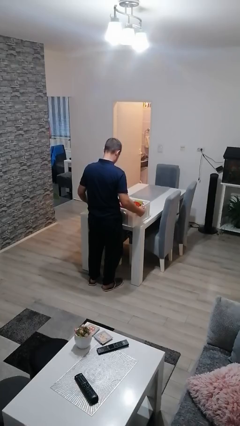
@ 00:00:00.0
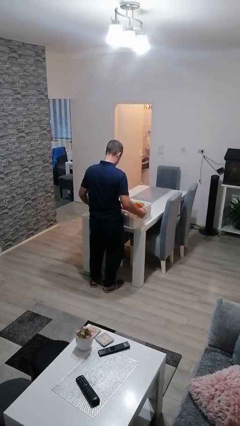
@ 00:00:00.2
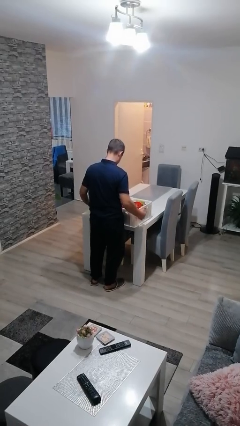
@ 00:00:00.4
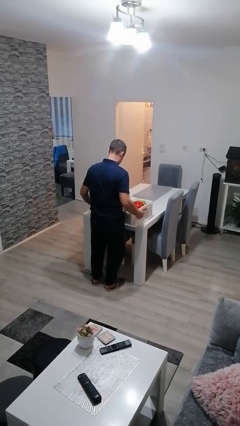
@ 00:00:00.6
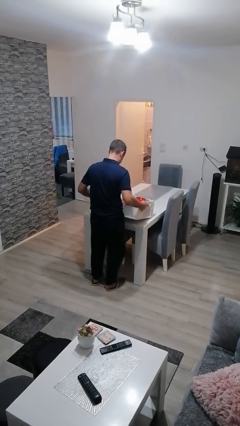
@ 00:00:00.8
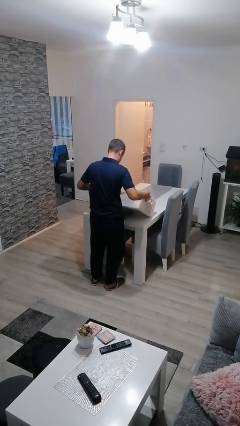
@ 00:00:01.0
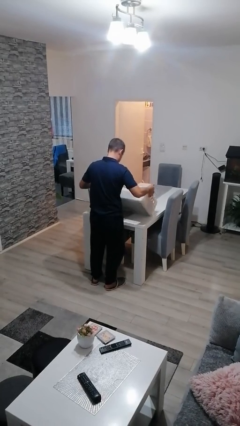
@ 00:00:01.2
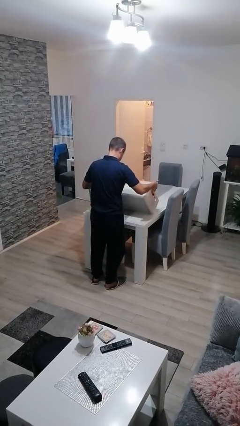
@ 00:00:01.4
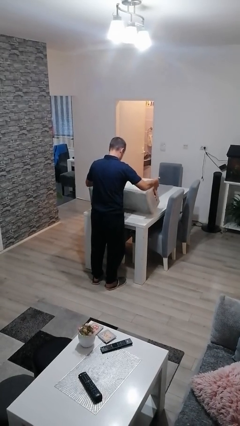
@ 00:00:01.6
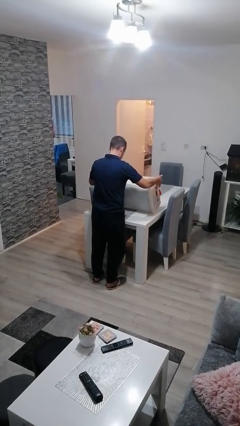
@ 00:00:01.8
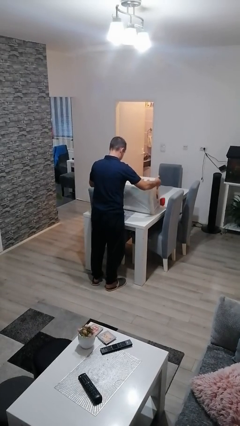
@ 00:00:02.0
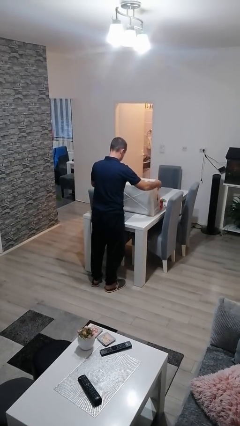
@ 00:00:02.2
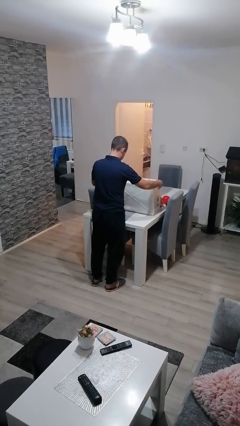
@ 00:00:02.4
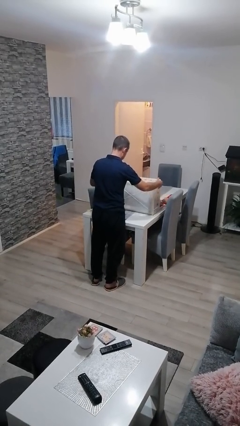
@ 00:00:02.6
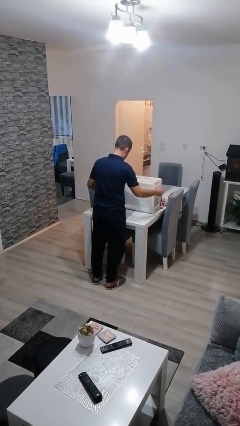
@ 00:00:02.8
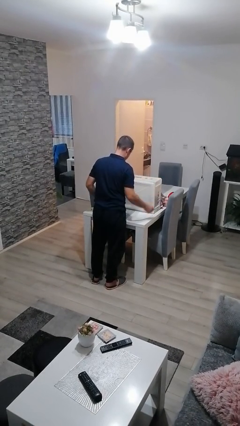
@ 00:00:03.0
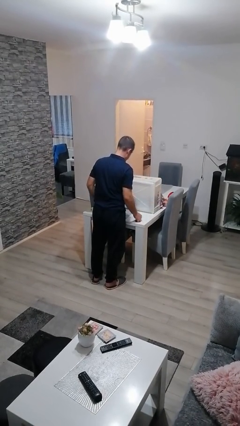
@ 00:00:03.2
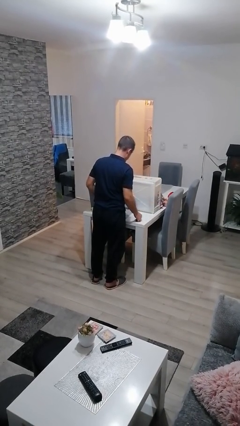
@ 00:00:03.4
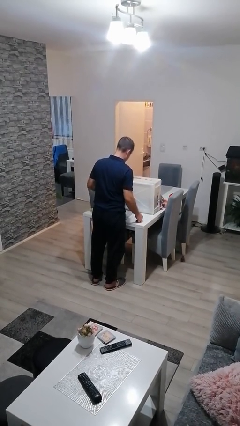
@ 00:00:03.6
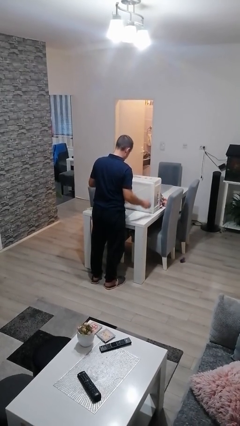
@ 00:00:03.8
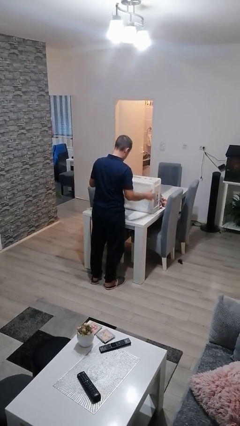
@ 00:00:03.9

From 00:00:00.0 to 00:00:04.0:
person unloads box onto table

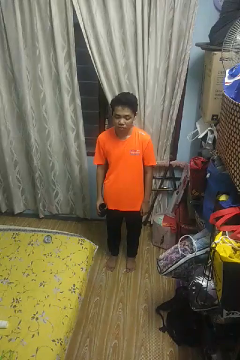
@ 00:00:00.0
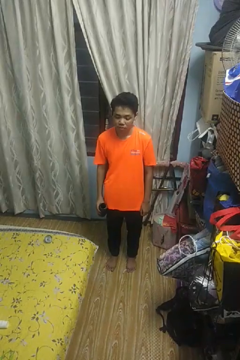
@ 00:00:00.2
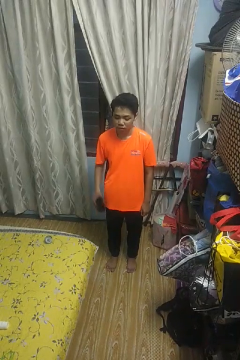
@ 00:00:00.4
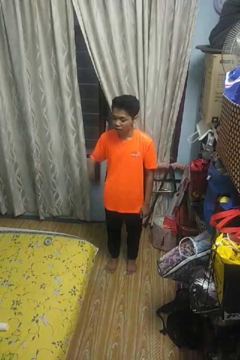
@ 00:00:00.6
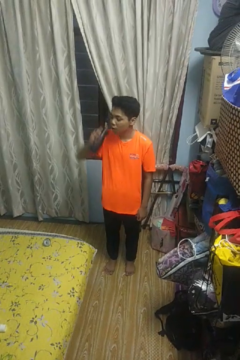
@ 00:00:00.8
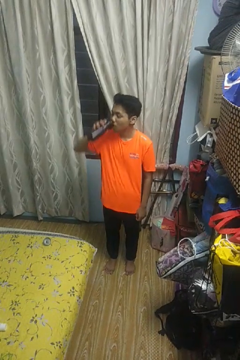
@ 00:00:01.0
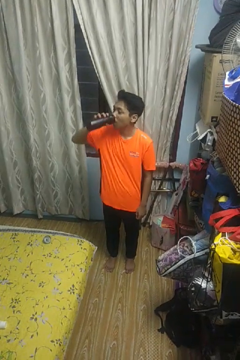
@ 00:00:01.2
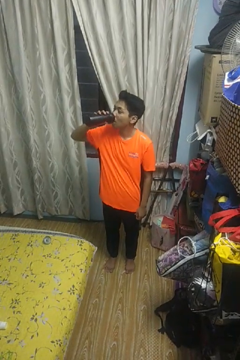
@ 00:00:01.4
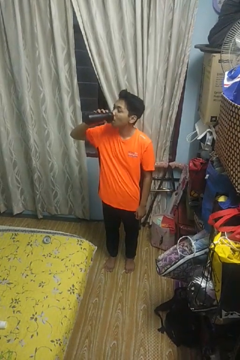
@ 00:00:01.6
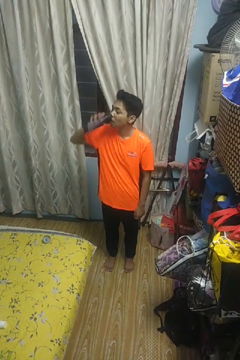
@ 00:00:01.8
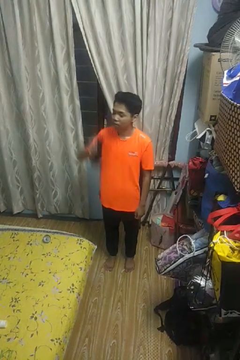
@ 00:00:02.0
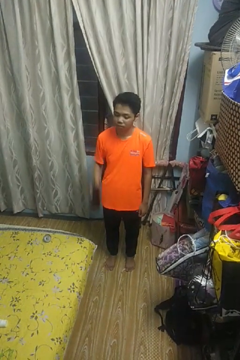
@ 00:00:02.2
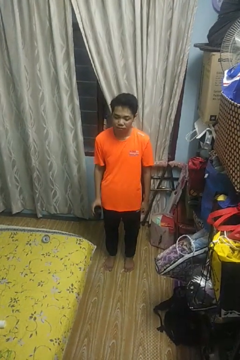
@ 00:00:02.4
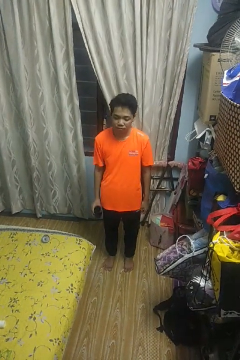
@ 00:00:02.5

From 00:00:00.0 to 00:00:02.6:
person drinks from bottle

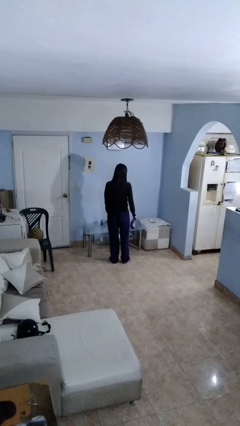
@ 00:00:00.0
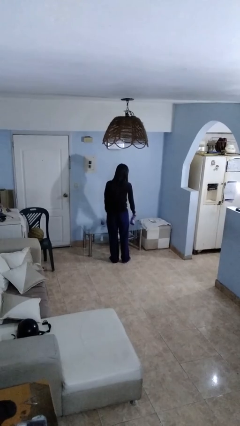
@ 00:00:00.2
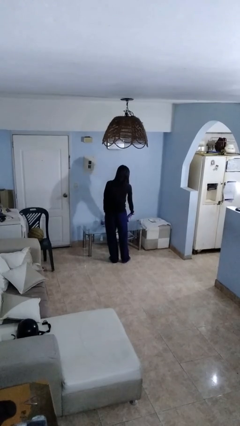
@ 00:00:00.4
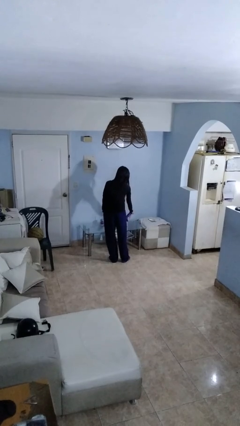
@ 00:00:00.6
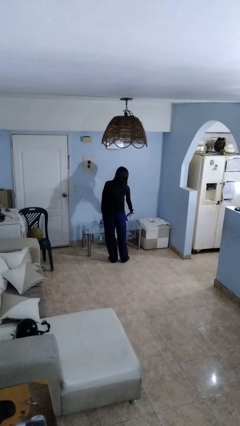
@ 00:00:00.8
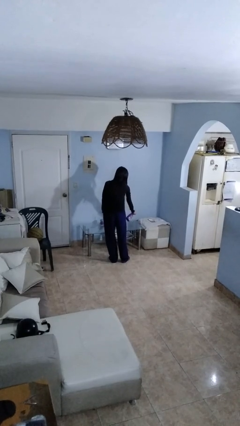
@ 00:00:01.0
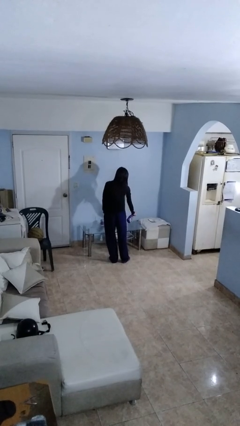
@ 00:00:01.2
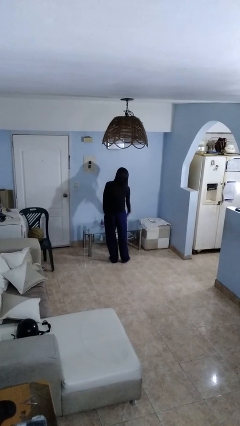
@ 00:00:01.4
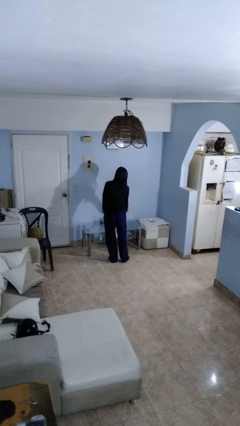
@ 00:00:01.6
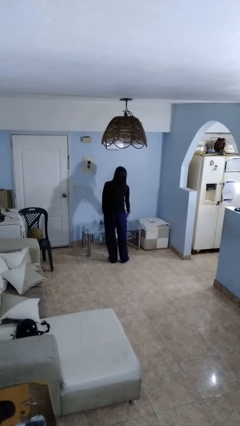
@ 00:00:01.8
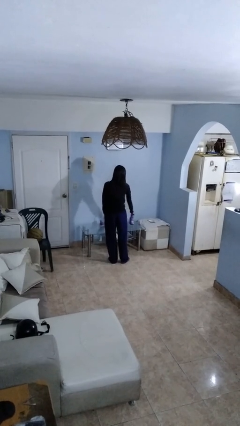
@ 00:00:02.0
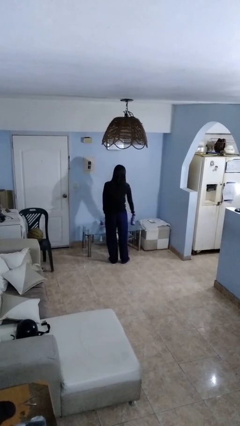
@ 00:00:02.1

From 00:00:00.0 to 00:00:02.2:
person sprays from bottle

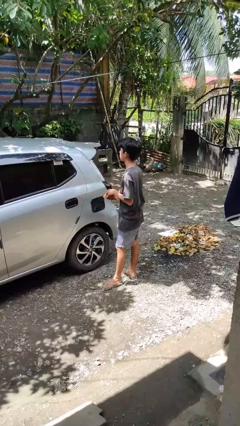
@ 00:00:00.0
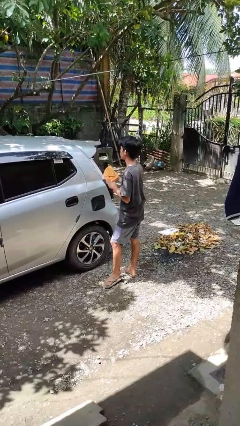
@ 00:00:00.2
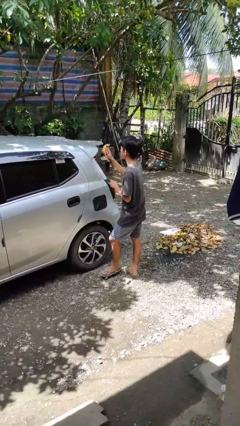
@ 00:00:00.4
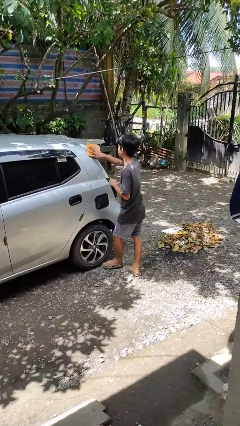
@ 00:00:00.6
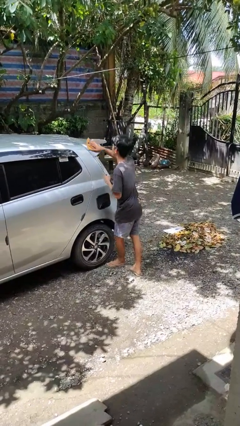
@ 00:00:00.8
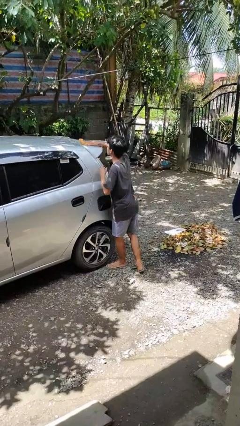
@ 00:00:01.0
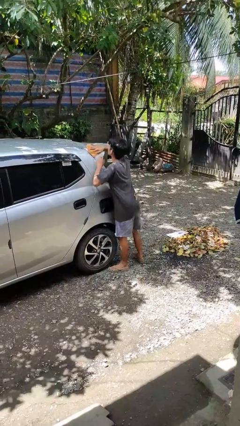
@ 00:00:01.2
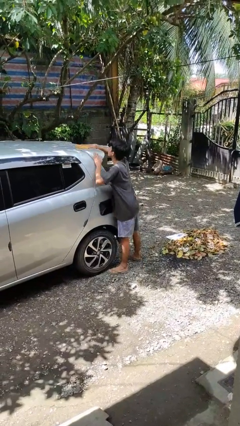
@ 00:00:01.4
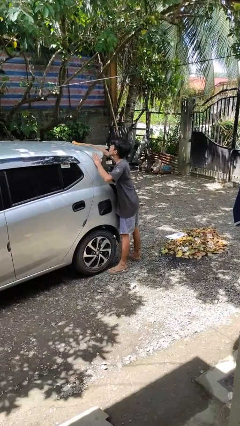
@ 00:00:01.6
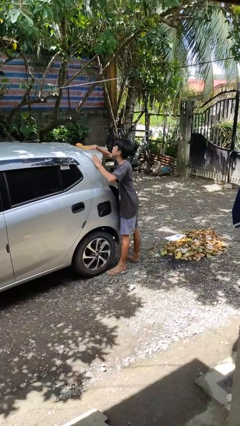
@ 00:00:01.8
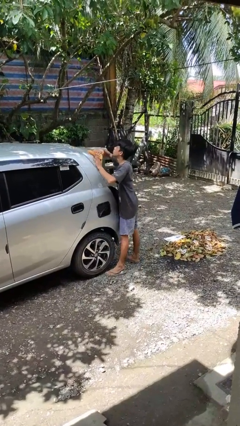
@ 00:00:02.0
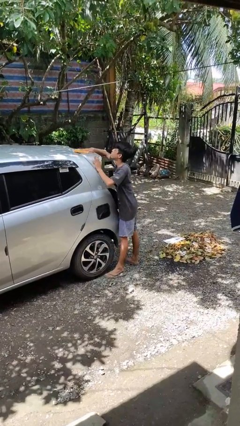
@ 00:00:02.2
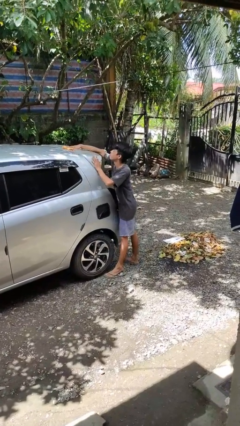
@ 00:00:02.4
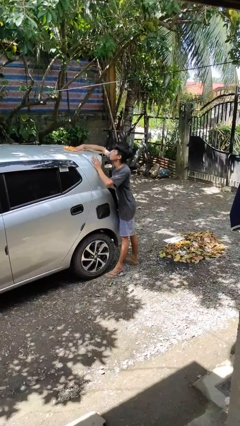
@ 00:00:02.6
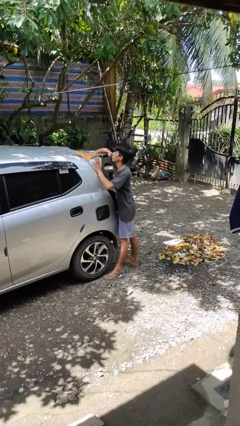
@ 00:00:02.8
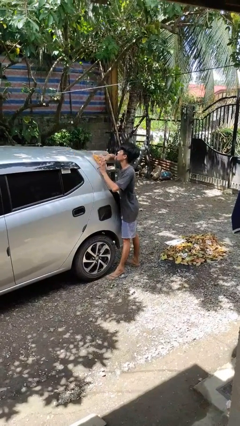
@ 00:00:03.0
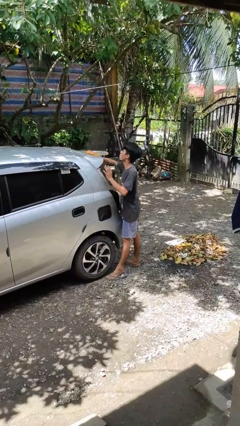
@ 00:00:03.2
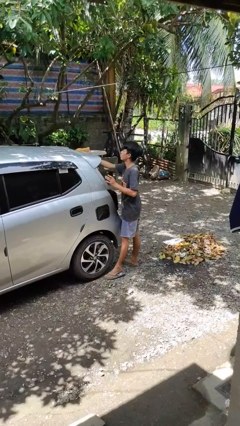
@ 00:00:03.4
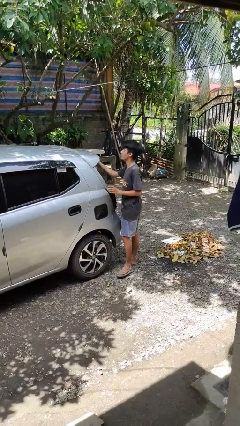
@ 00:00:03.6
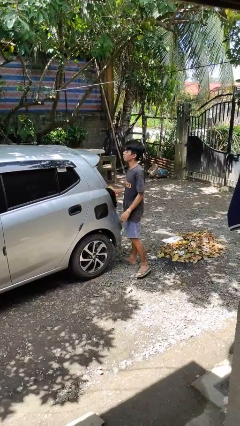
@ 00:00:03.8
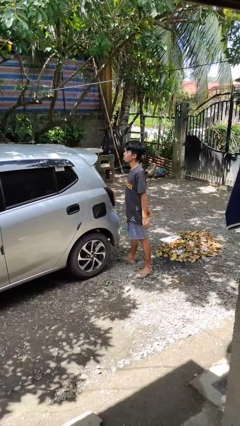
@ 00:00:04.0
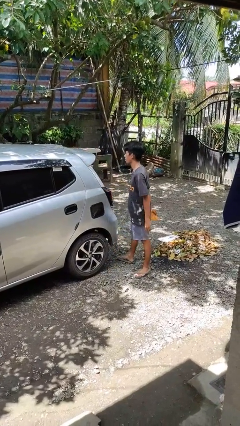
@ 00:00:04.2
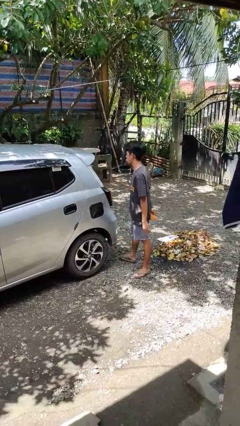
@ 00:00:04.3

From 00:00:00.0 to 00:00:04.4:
person polishes car with rag

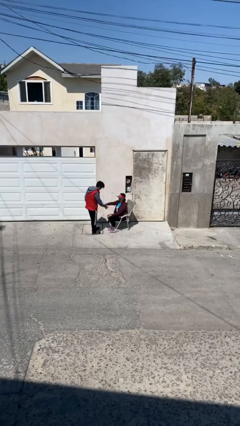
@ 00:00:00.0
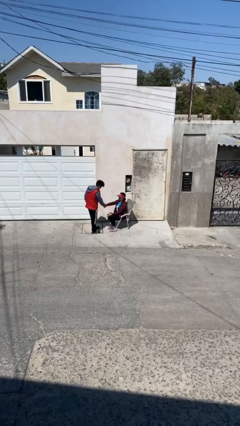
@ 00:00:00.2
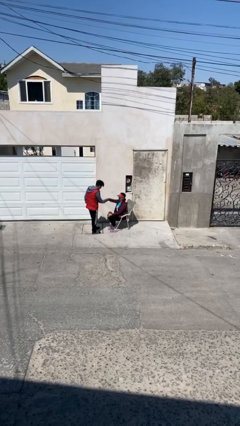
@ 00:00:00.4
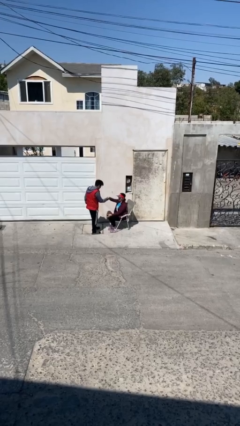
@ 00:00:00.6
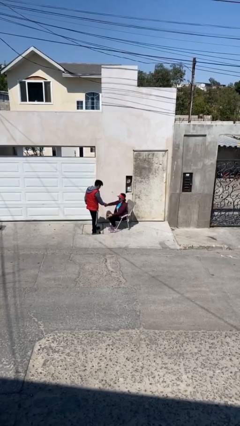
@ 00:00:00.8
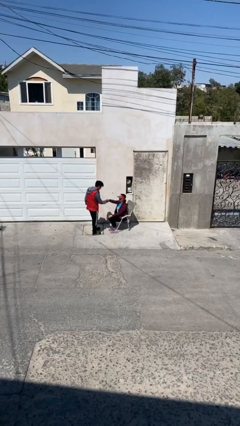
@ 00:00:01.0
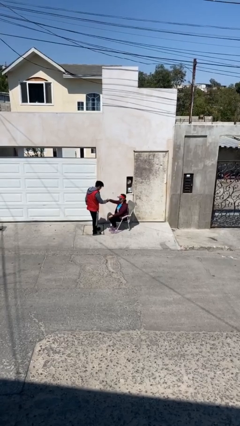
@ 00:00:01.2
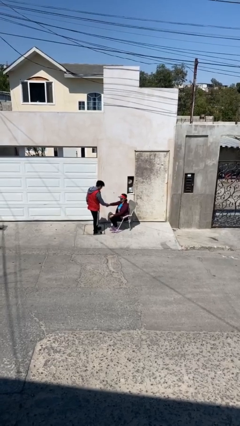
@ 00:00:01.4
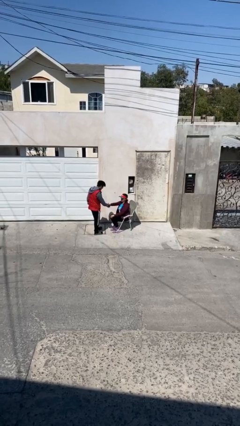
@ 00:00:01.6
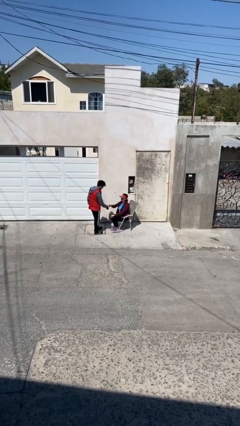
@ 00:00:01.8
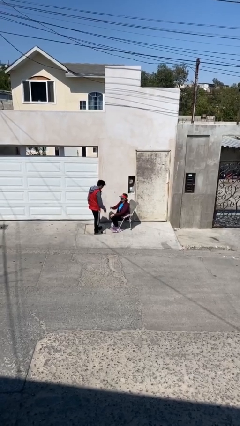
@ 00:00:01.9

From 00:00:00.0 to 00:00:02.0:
person shakes hand

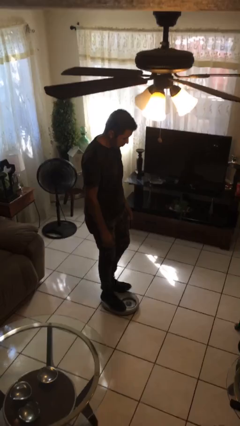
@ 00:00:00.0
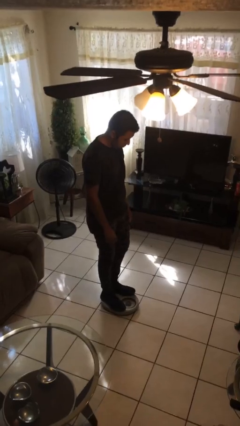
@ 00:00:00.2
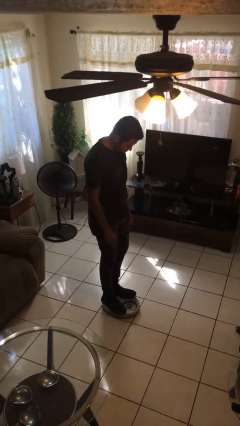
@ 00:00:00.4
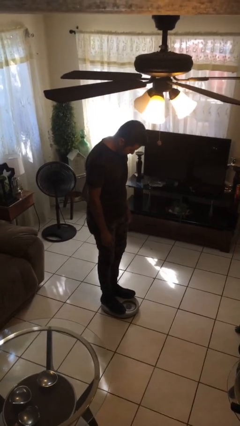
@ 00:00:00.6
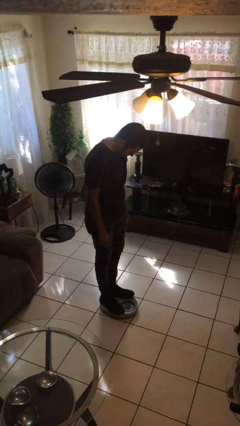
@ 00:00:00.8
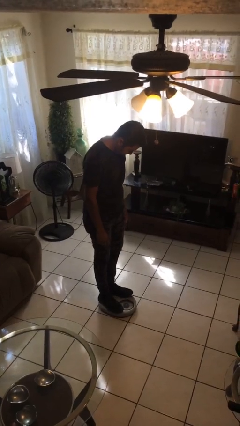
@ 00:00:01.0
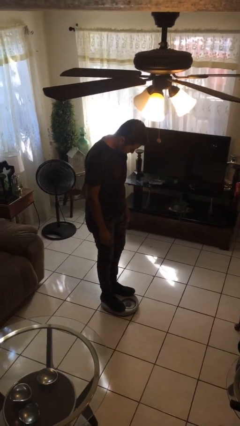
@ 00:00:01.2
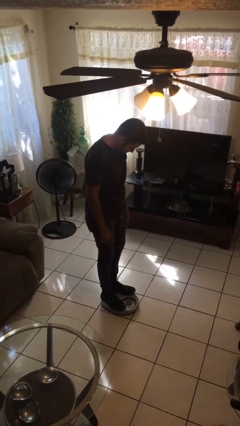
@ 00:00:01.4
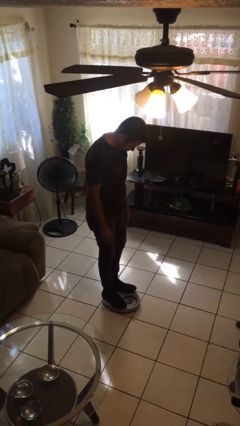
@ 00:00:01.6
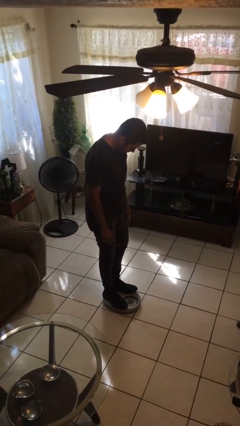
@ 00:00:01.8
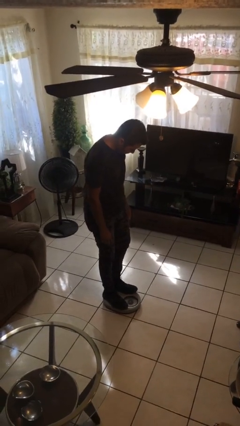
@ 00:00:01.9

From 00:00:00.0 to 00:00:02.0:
person uses bodyweight scale

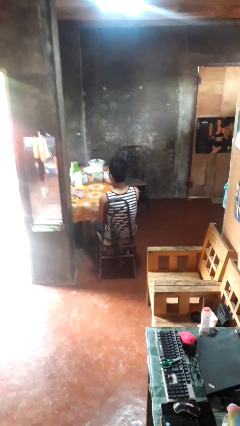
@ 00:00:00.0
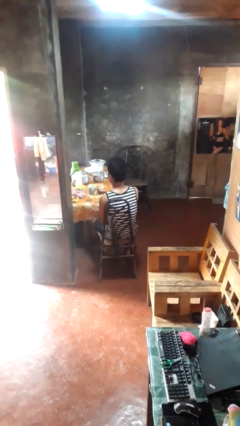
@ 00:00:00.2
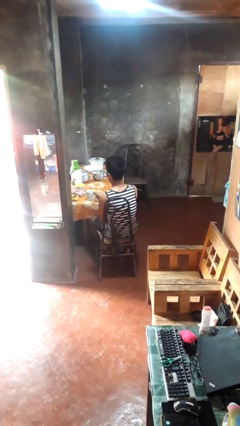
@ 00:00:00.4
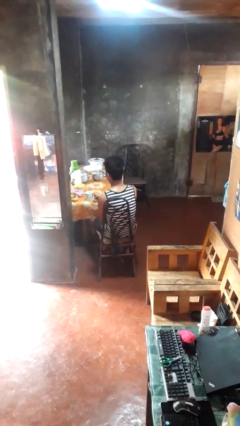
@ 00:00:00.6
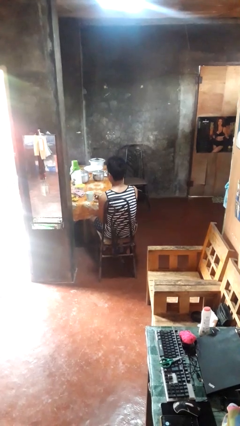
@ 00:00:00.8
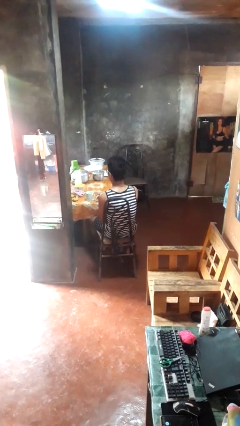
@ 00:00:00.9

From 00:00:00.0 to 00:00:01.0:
person puts down object on table
